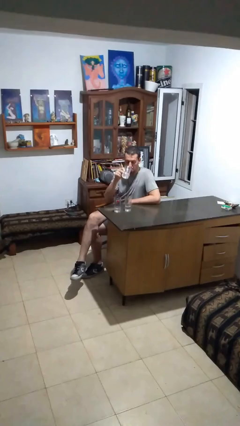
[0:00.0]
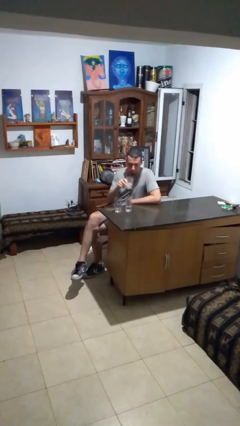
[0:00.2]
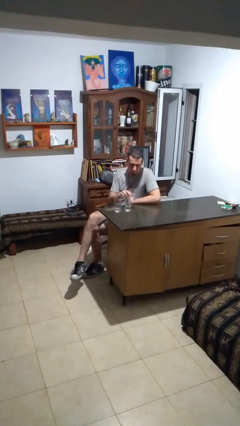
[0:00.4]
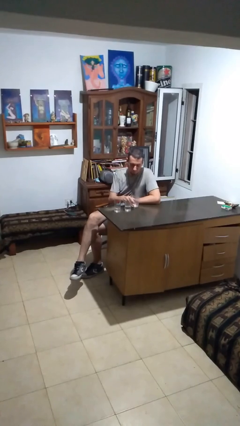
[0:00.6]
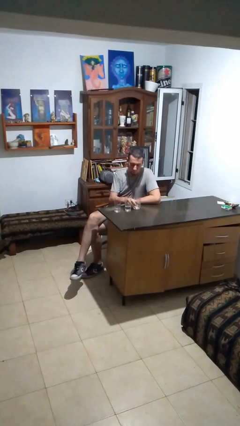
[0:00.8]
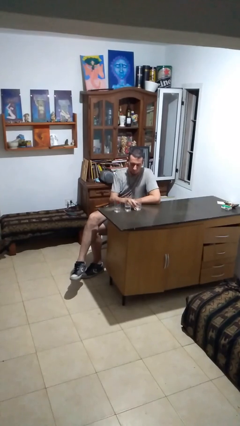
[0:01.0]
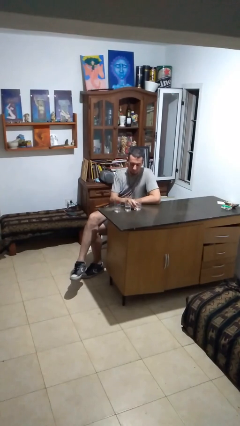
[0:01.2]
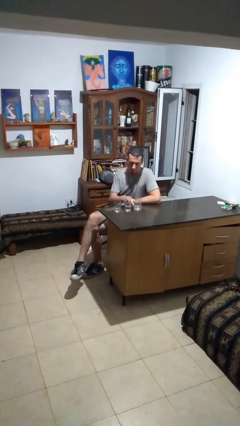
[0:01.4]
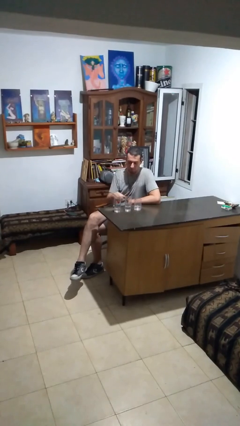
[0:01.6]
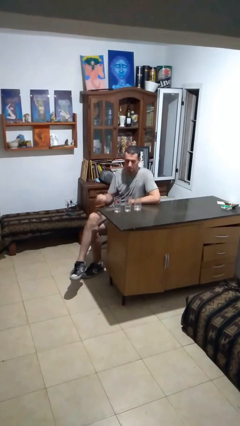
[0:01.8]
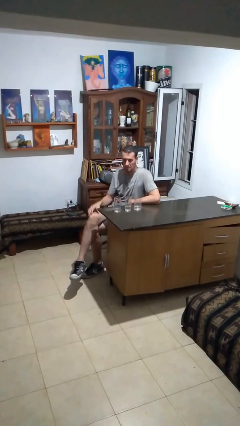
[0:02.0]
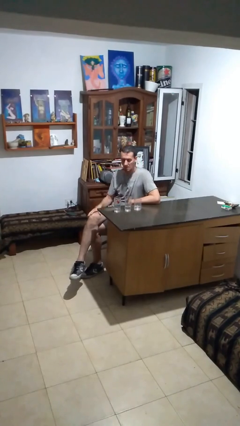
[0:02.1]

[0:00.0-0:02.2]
person puts down object on table

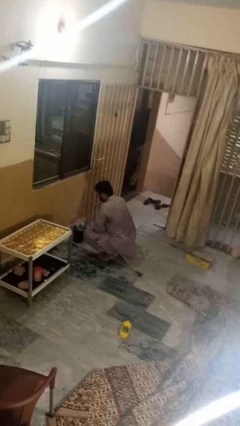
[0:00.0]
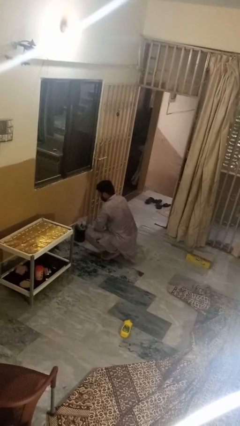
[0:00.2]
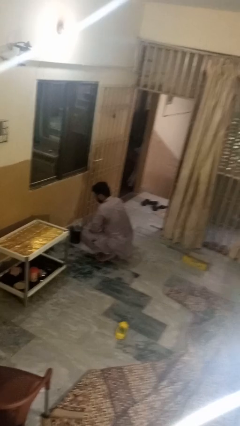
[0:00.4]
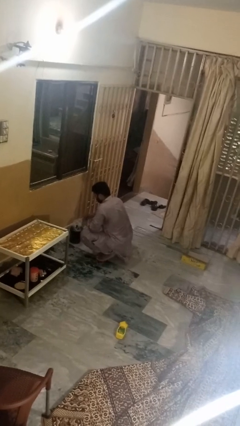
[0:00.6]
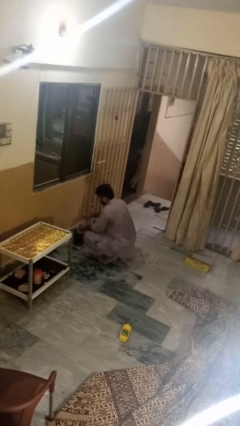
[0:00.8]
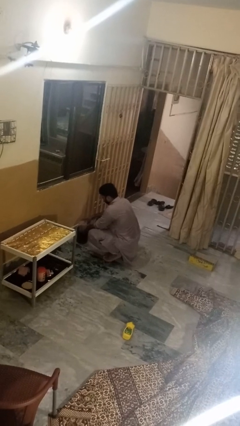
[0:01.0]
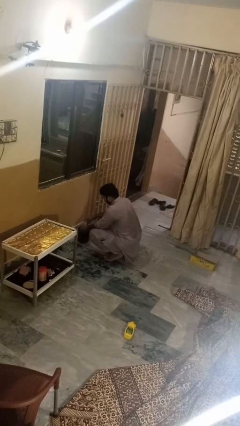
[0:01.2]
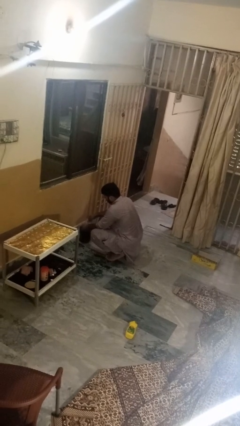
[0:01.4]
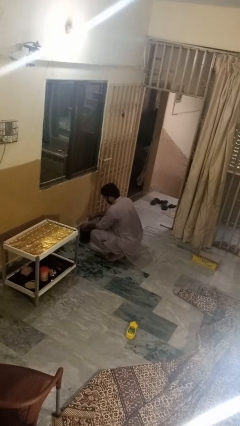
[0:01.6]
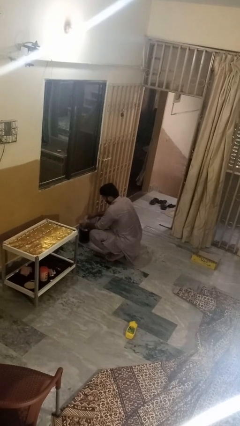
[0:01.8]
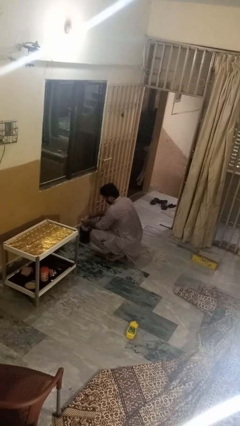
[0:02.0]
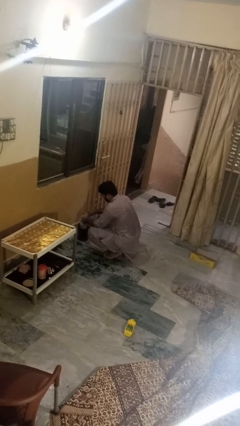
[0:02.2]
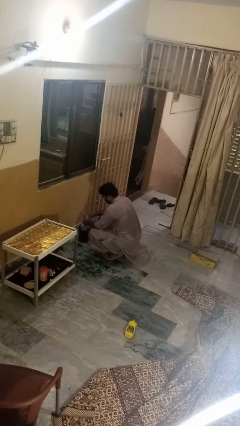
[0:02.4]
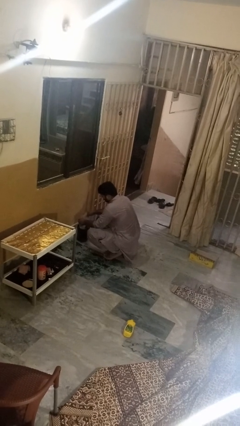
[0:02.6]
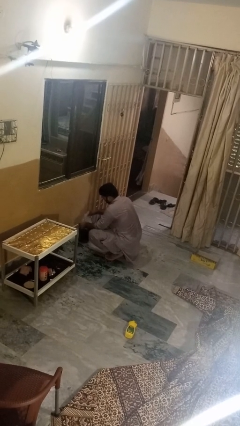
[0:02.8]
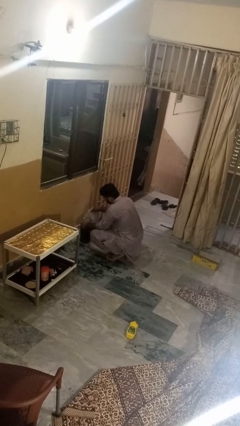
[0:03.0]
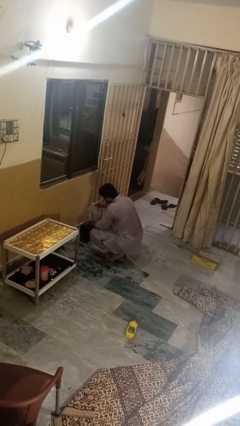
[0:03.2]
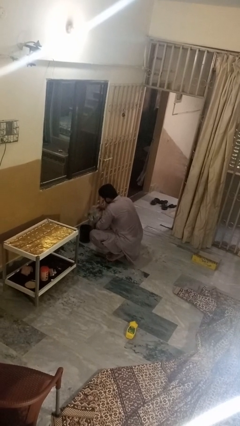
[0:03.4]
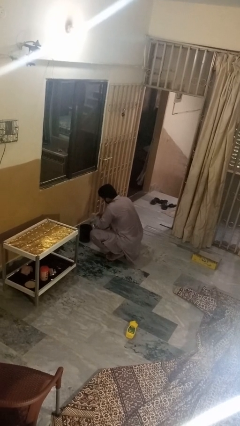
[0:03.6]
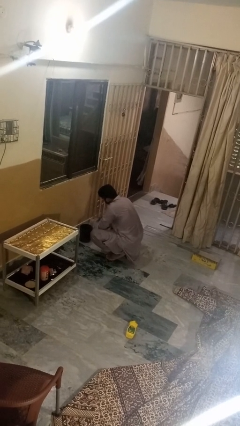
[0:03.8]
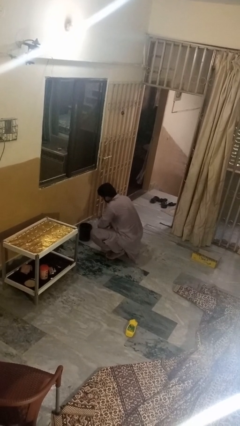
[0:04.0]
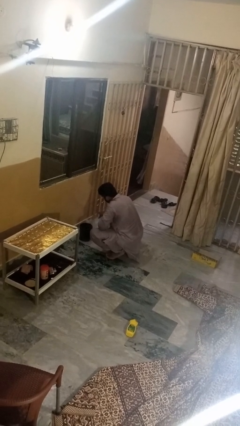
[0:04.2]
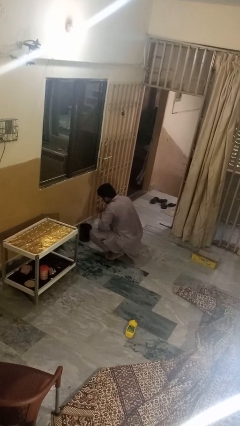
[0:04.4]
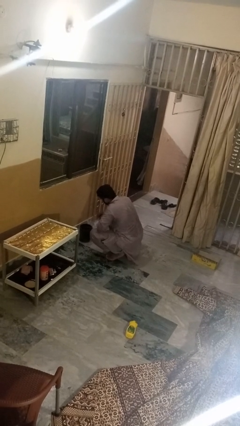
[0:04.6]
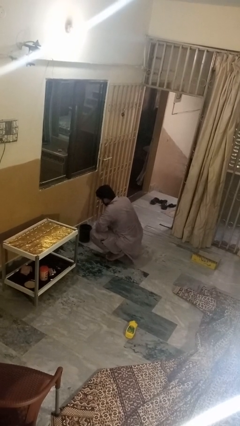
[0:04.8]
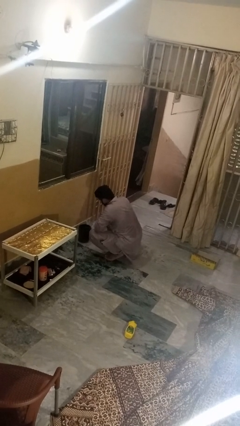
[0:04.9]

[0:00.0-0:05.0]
person removes trashbag from trashcan

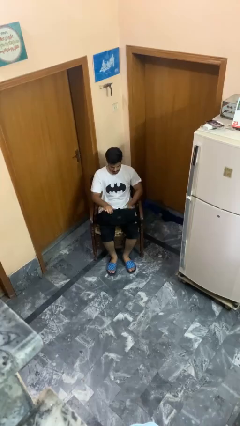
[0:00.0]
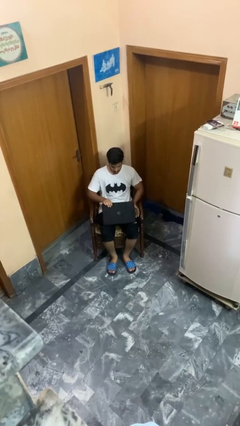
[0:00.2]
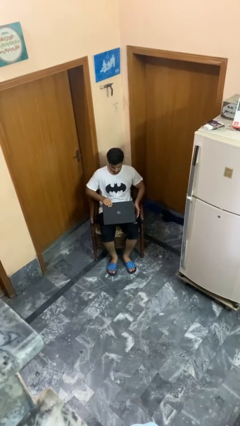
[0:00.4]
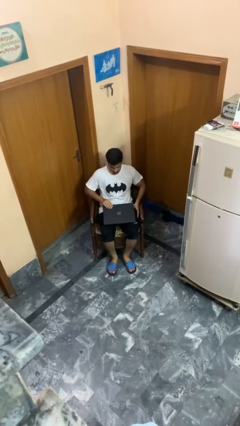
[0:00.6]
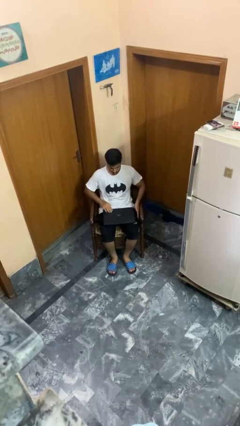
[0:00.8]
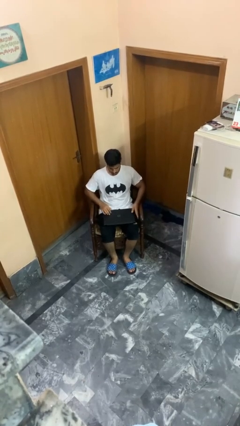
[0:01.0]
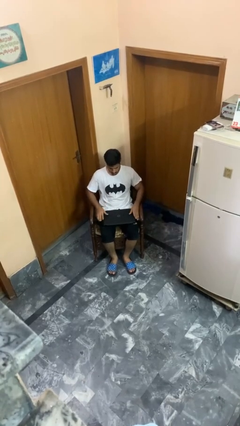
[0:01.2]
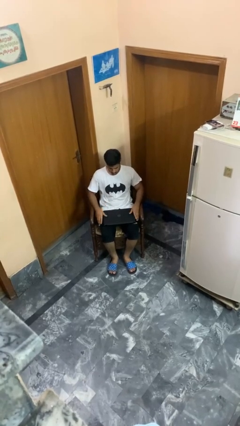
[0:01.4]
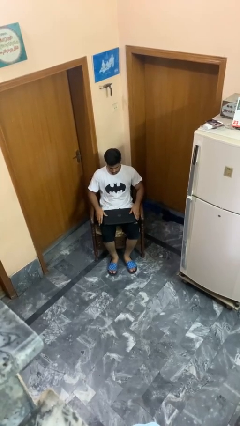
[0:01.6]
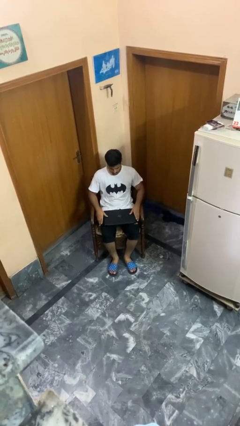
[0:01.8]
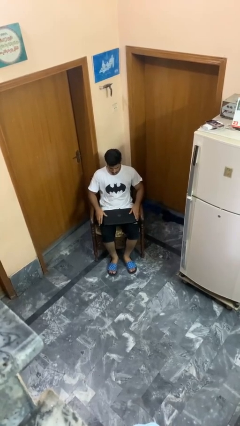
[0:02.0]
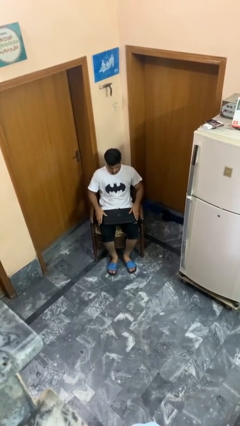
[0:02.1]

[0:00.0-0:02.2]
person closes laptop

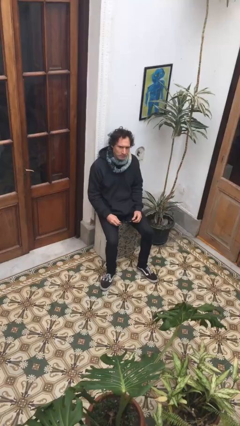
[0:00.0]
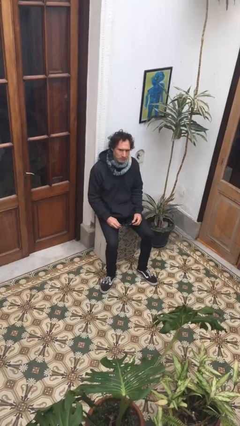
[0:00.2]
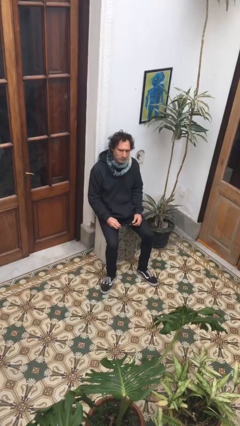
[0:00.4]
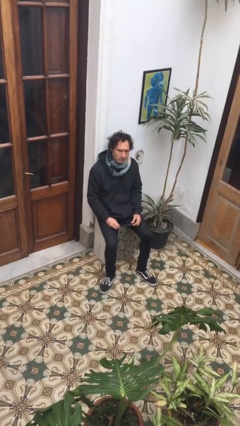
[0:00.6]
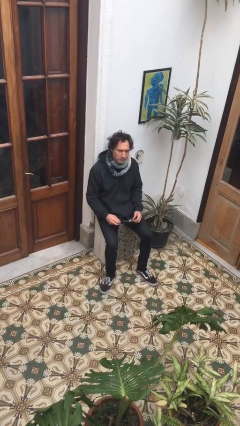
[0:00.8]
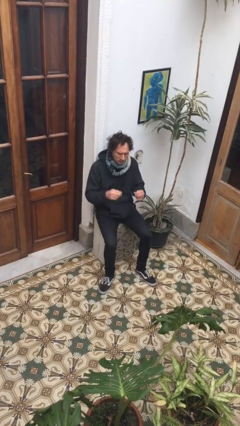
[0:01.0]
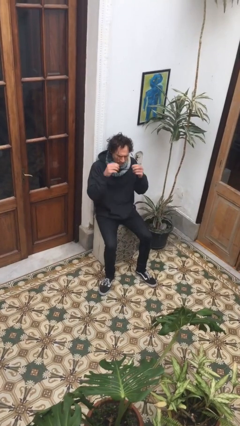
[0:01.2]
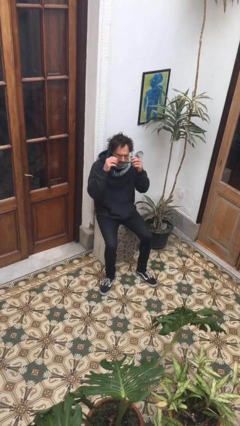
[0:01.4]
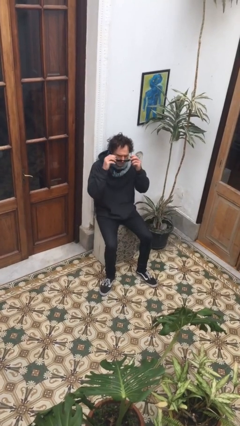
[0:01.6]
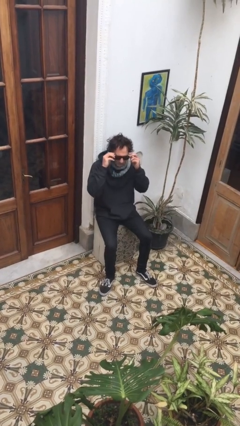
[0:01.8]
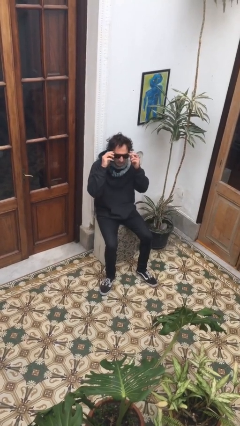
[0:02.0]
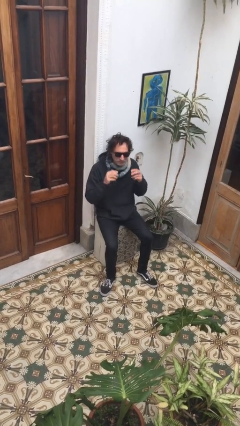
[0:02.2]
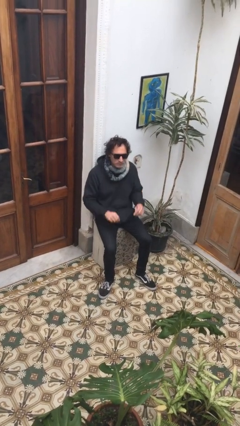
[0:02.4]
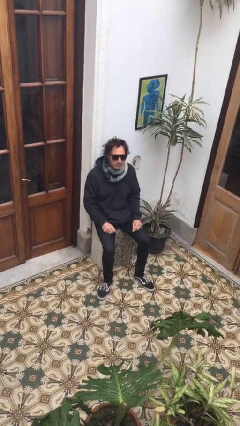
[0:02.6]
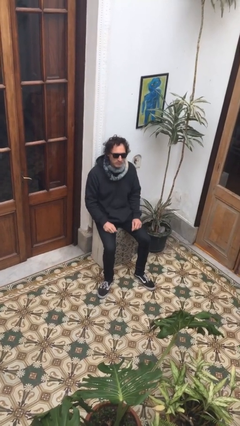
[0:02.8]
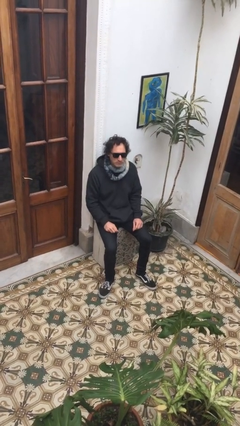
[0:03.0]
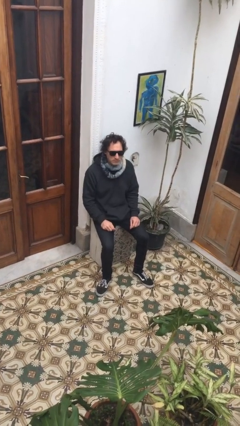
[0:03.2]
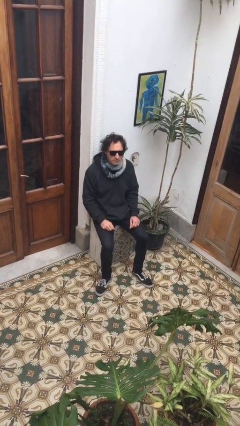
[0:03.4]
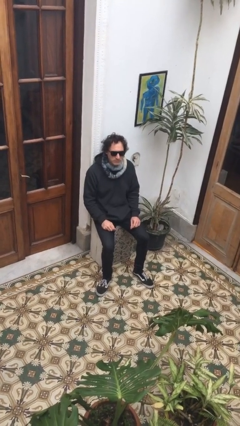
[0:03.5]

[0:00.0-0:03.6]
person puts on sunglasses

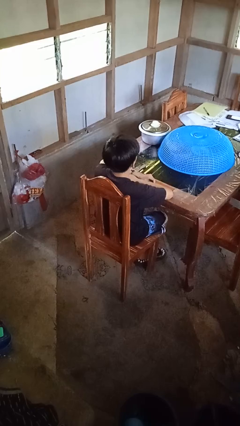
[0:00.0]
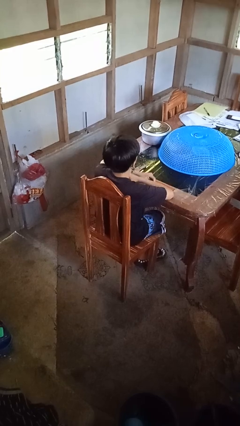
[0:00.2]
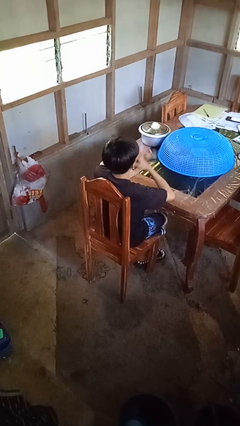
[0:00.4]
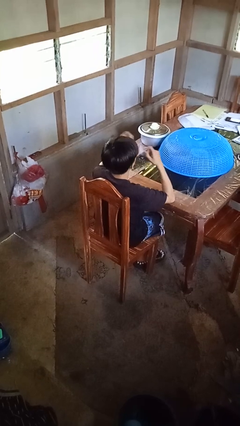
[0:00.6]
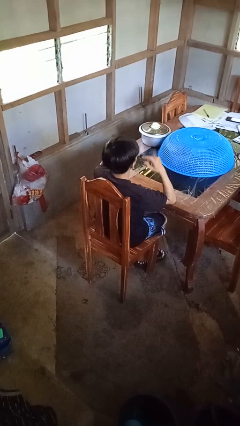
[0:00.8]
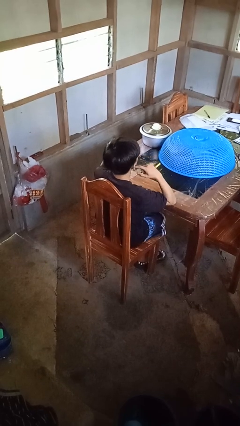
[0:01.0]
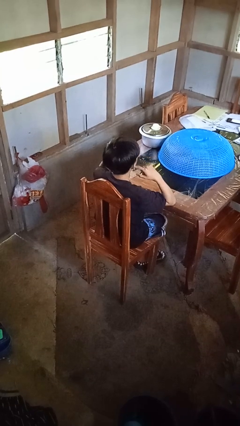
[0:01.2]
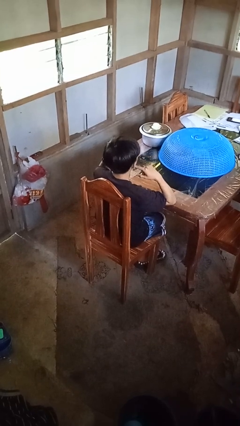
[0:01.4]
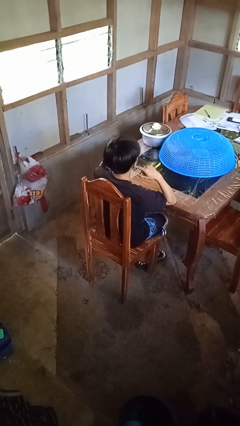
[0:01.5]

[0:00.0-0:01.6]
person puts fingers in ear

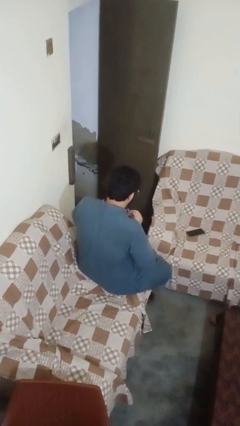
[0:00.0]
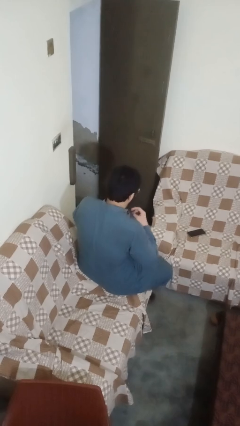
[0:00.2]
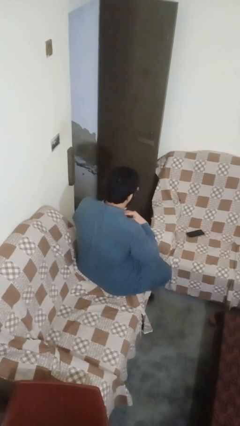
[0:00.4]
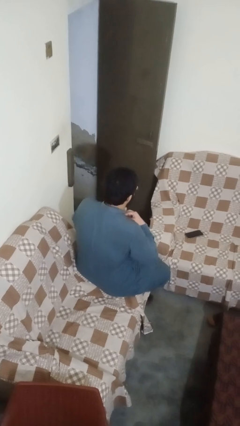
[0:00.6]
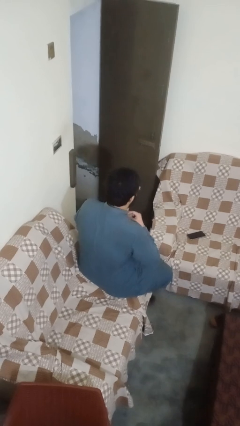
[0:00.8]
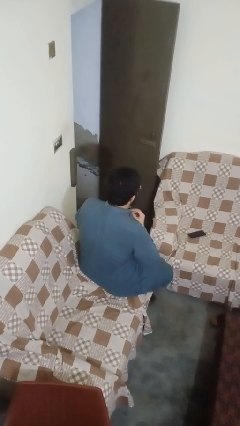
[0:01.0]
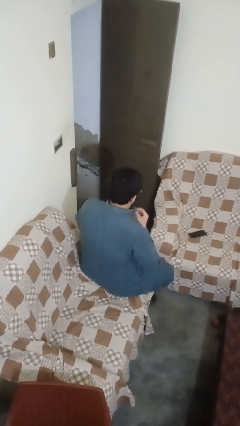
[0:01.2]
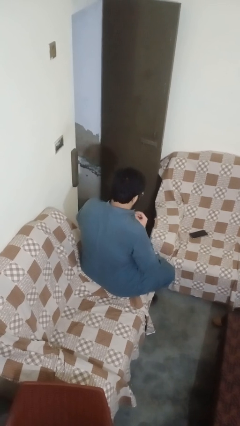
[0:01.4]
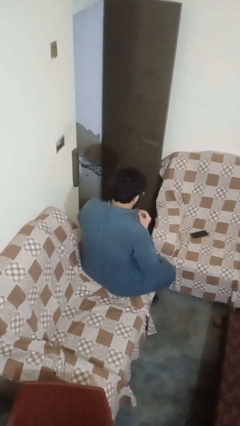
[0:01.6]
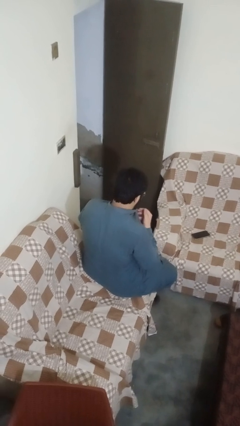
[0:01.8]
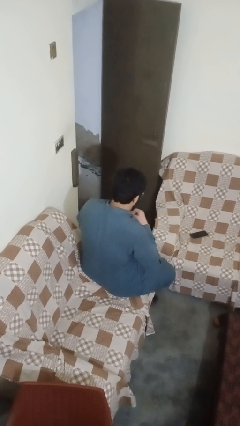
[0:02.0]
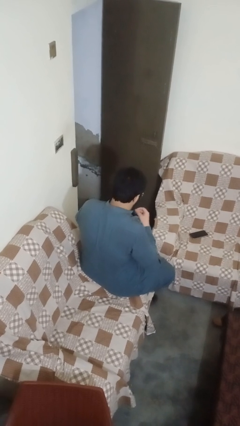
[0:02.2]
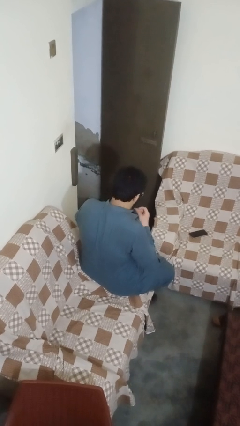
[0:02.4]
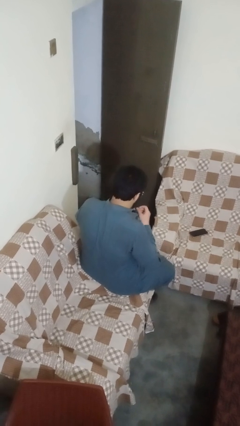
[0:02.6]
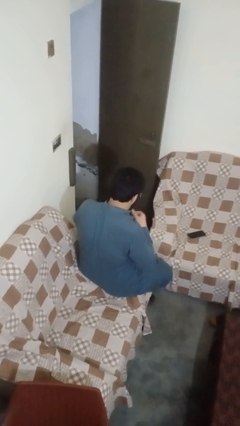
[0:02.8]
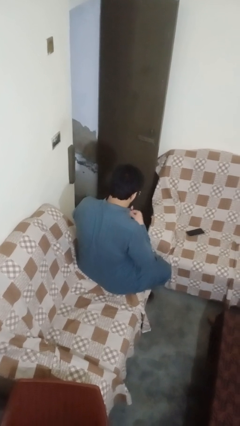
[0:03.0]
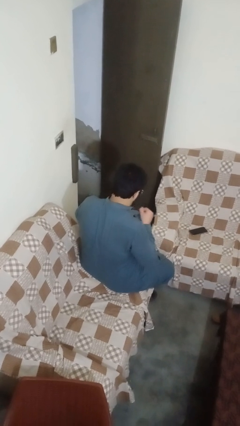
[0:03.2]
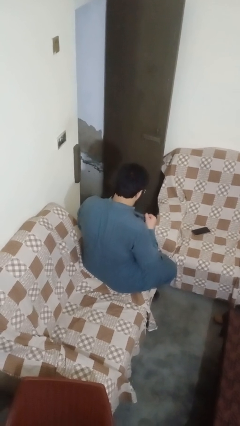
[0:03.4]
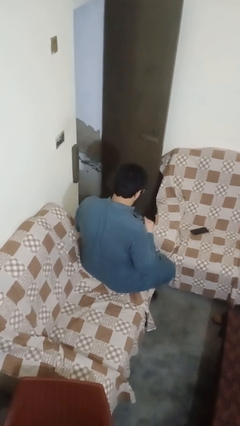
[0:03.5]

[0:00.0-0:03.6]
person unbuttons shirt
